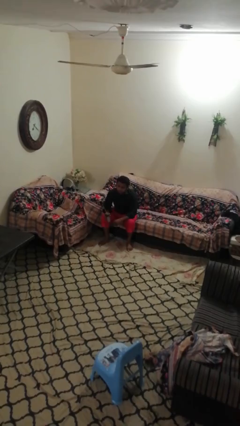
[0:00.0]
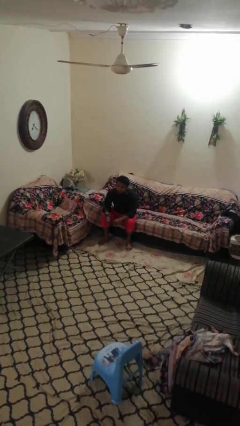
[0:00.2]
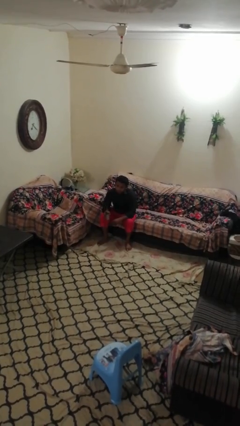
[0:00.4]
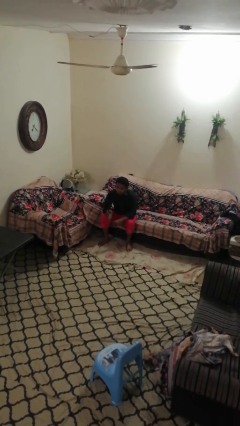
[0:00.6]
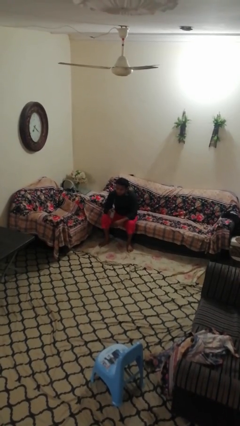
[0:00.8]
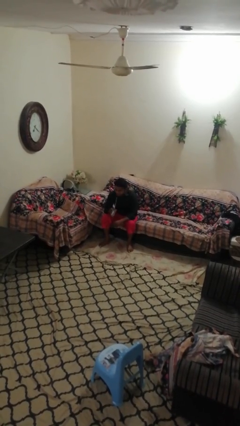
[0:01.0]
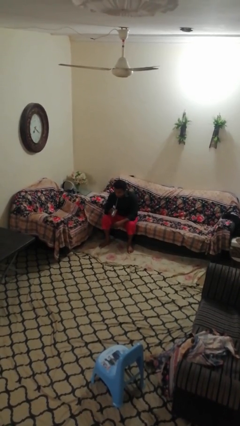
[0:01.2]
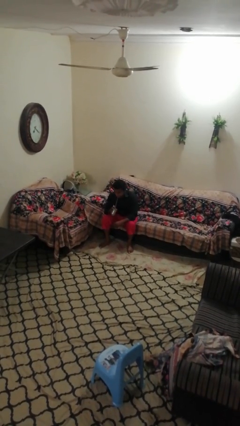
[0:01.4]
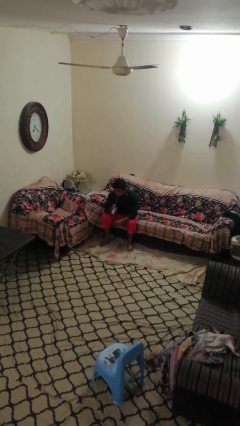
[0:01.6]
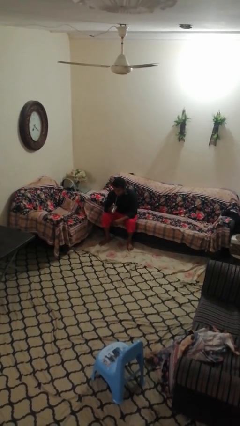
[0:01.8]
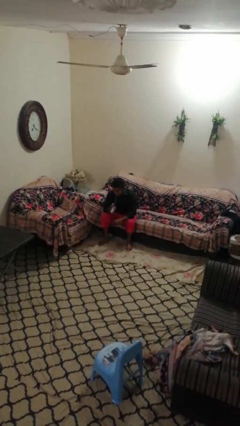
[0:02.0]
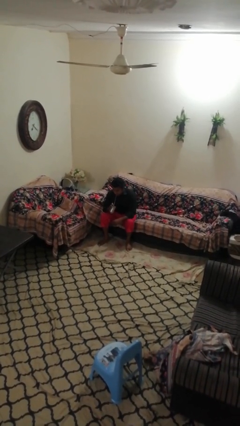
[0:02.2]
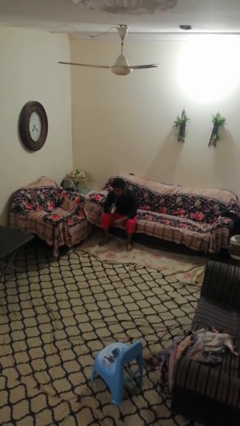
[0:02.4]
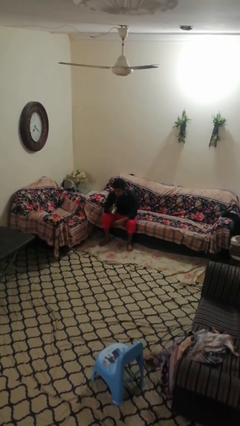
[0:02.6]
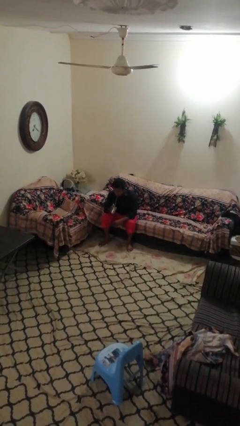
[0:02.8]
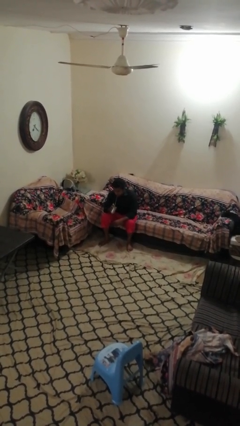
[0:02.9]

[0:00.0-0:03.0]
person drinks from straw

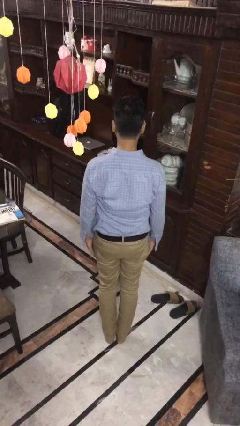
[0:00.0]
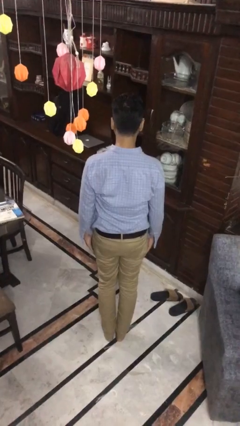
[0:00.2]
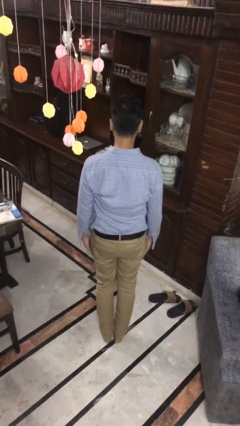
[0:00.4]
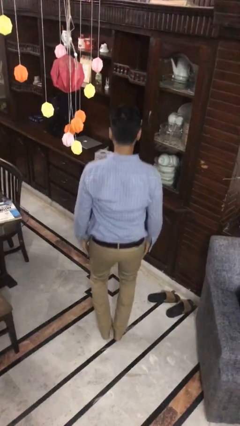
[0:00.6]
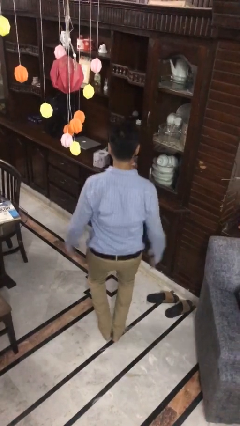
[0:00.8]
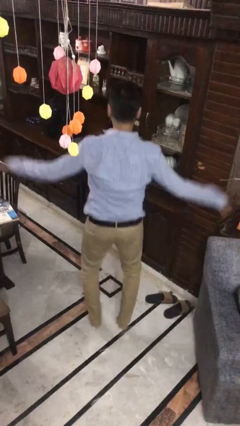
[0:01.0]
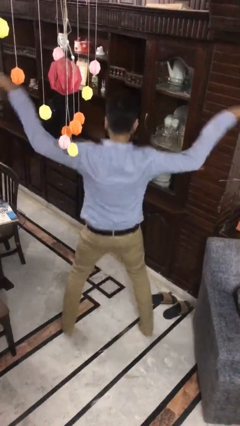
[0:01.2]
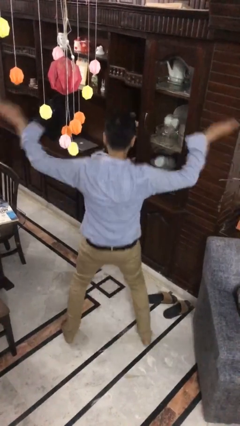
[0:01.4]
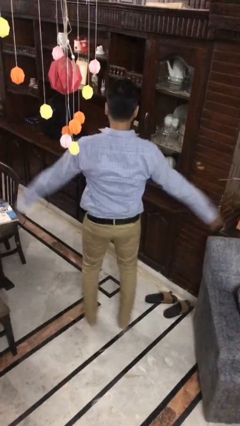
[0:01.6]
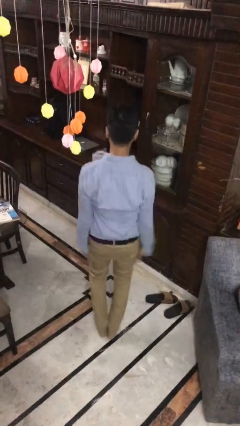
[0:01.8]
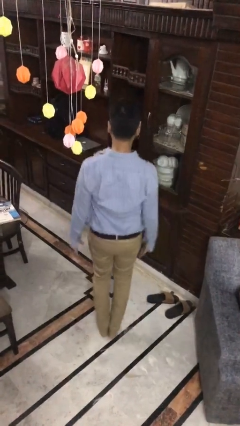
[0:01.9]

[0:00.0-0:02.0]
person exercises with jumping jacks

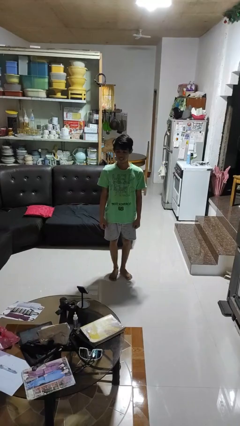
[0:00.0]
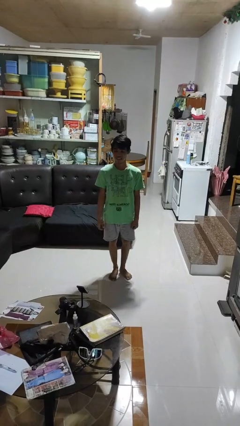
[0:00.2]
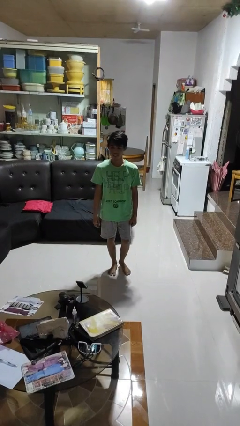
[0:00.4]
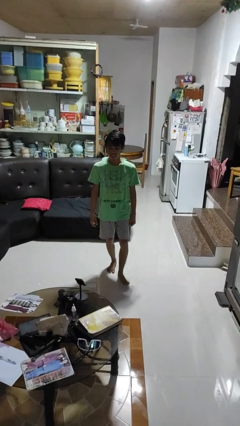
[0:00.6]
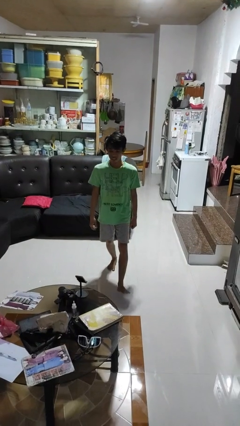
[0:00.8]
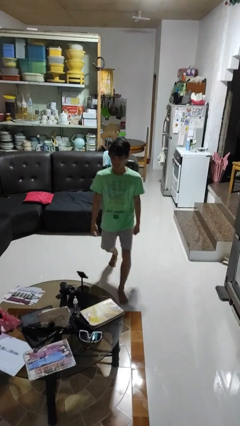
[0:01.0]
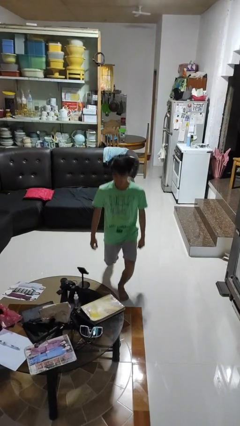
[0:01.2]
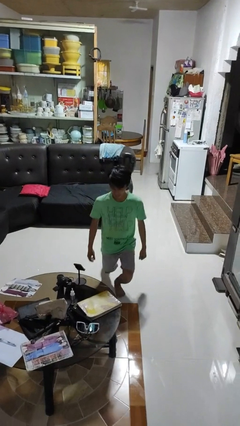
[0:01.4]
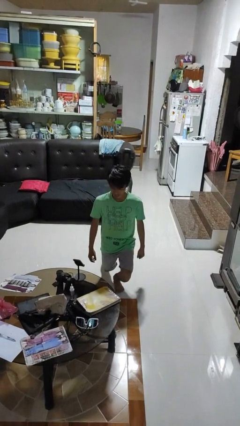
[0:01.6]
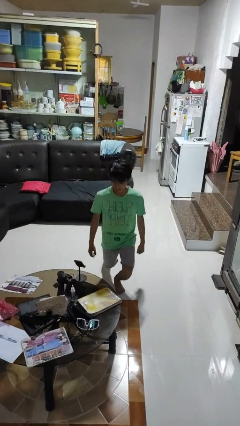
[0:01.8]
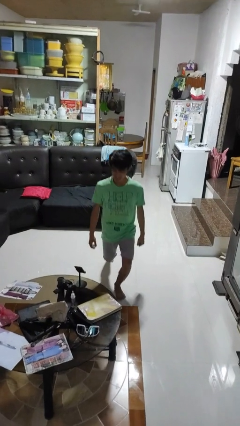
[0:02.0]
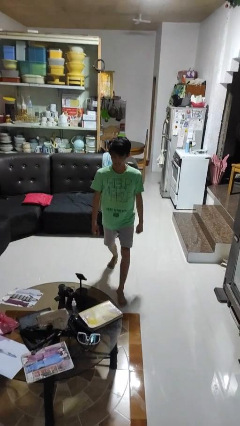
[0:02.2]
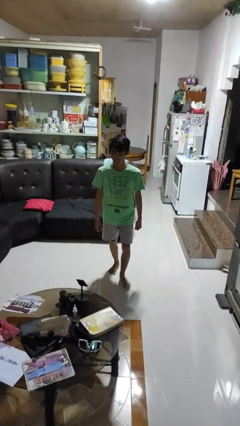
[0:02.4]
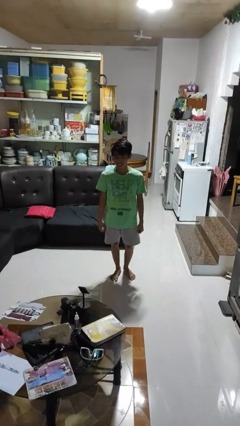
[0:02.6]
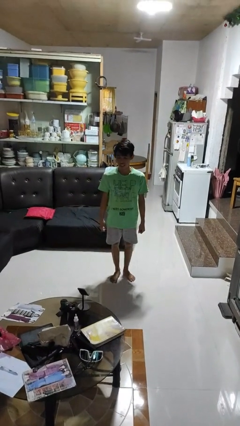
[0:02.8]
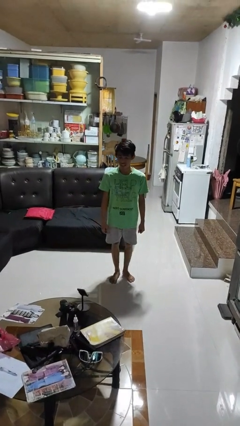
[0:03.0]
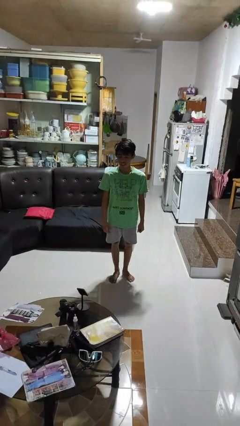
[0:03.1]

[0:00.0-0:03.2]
person exercises with lunges

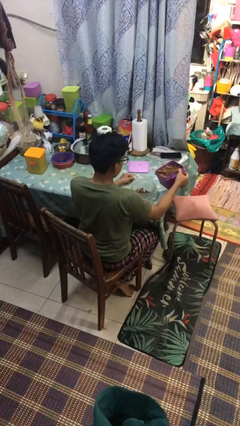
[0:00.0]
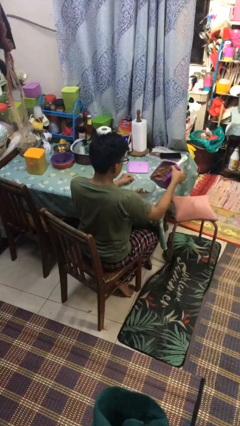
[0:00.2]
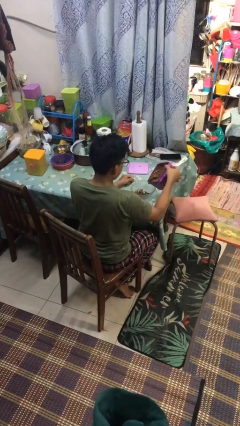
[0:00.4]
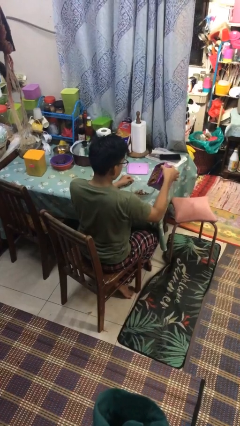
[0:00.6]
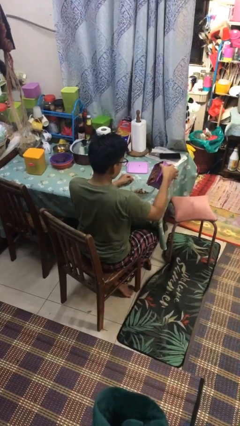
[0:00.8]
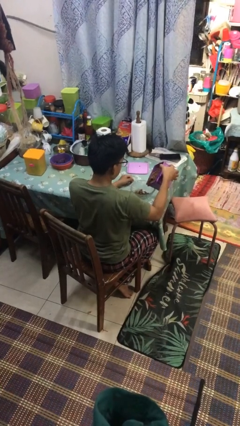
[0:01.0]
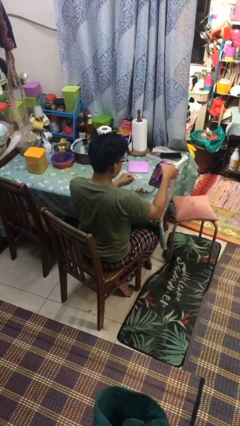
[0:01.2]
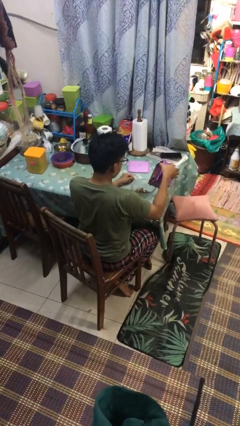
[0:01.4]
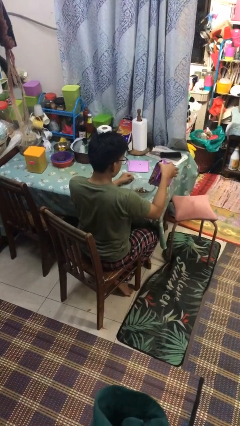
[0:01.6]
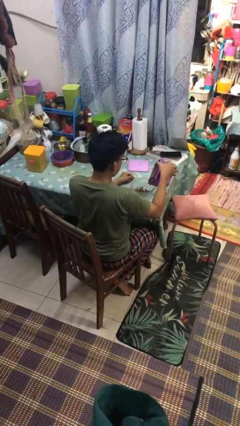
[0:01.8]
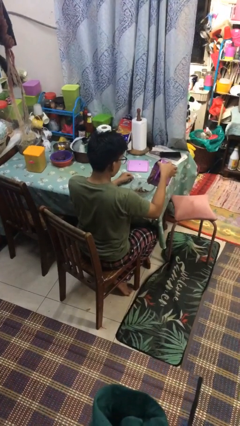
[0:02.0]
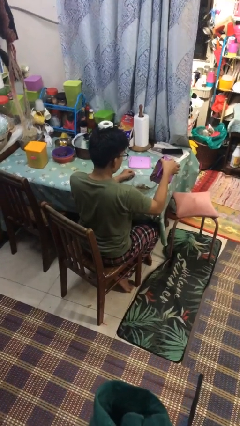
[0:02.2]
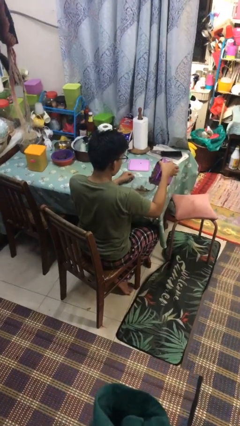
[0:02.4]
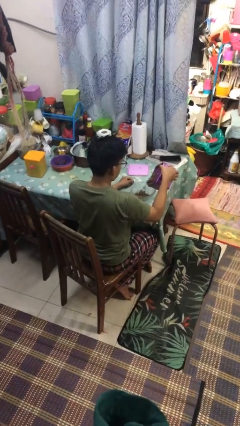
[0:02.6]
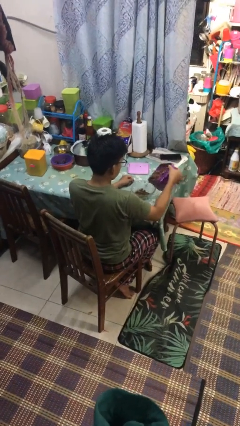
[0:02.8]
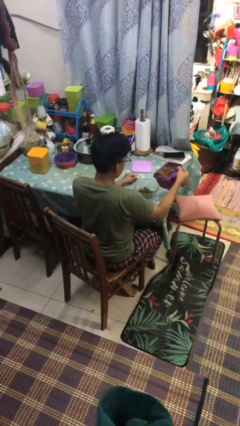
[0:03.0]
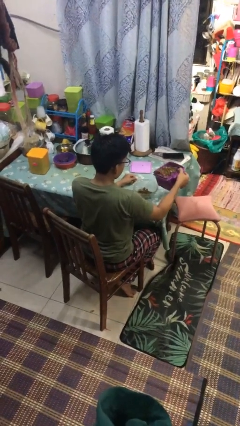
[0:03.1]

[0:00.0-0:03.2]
person pours into bowl

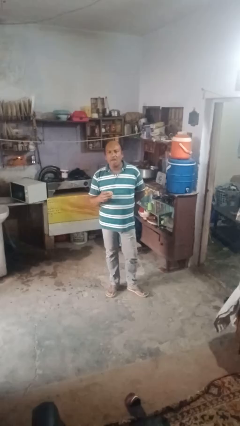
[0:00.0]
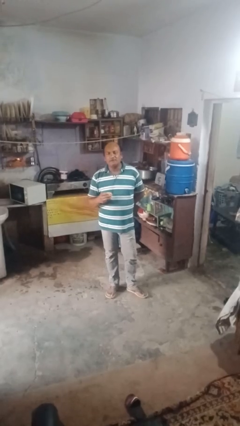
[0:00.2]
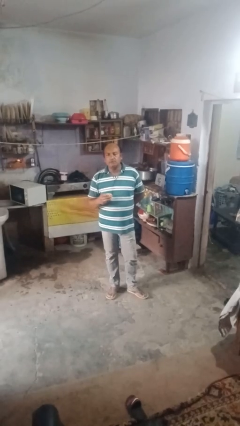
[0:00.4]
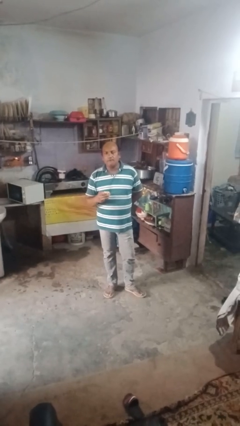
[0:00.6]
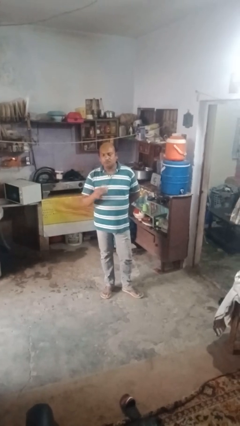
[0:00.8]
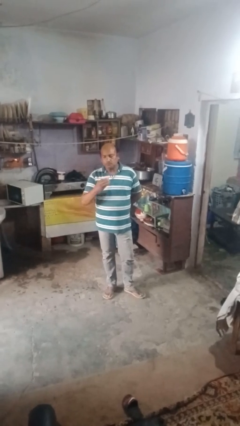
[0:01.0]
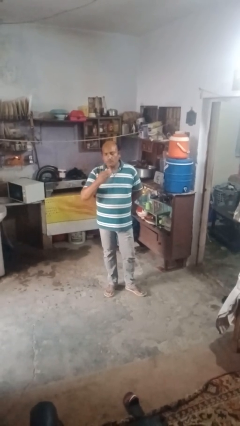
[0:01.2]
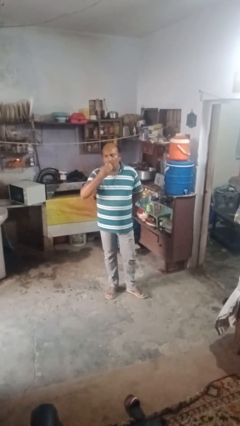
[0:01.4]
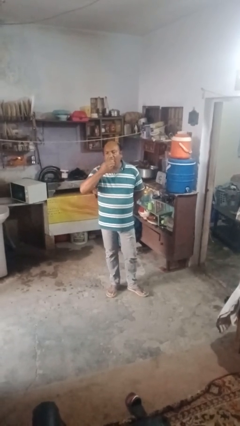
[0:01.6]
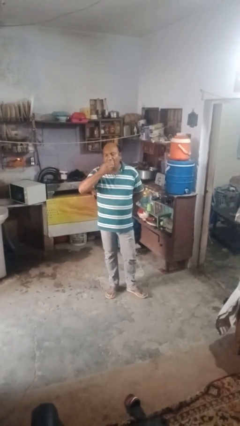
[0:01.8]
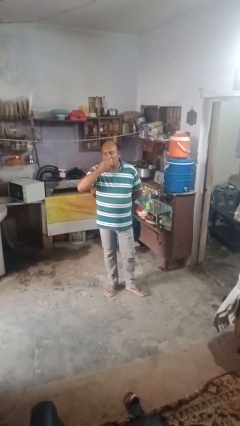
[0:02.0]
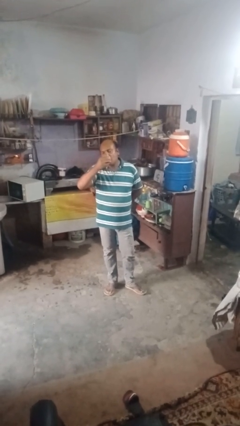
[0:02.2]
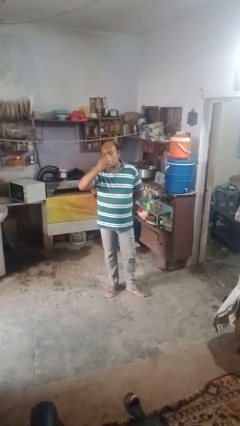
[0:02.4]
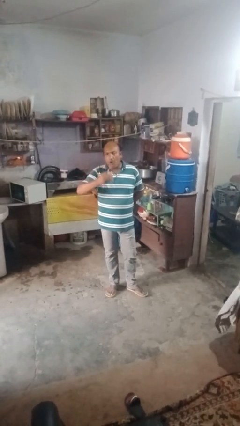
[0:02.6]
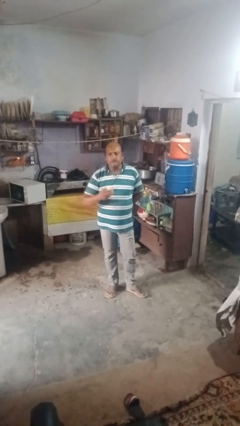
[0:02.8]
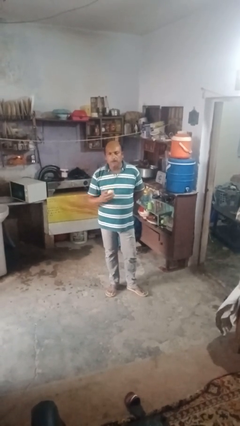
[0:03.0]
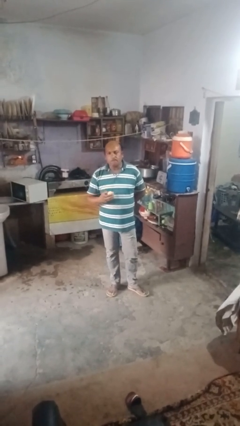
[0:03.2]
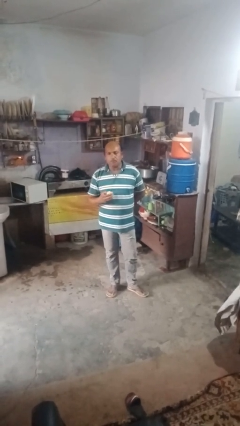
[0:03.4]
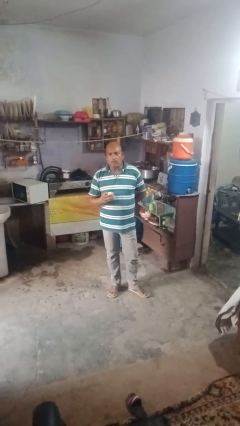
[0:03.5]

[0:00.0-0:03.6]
person eats apple

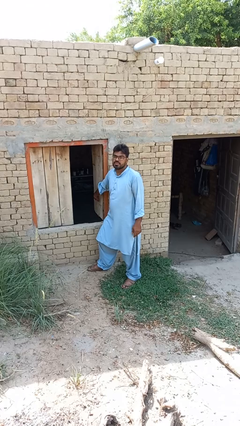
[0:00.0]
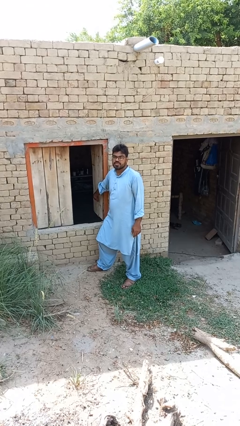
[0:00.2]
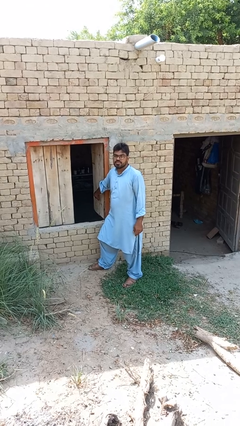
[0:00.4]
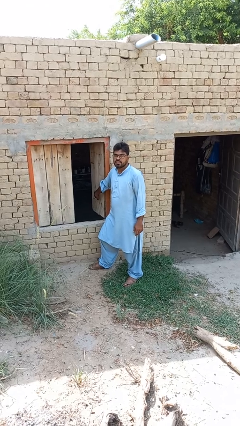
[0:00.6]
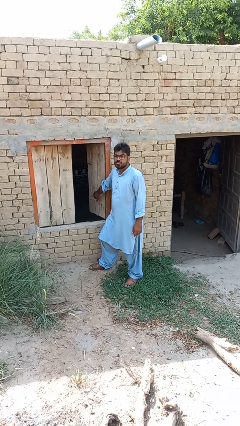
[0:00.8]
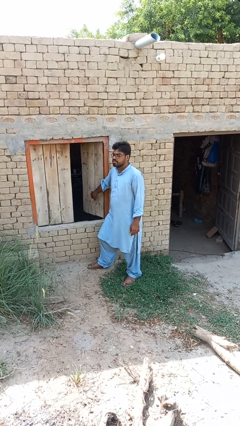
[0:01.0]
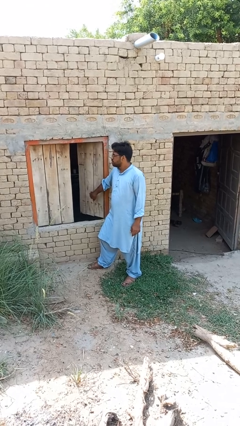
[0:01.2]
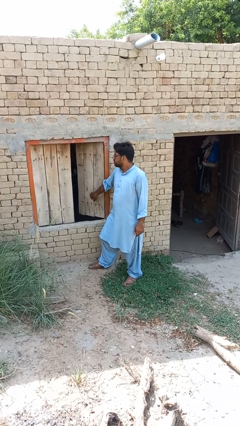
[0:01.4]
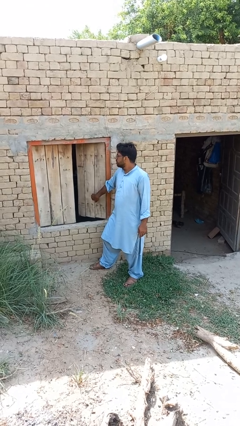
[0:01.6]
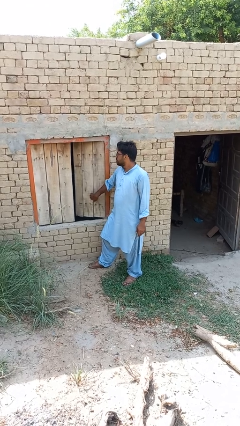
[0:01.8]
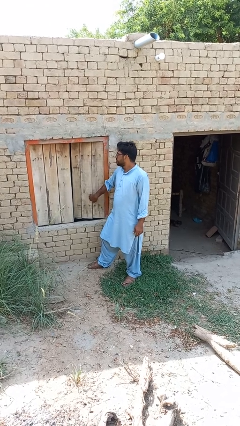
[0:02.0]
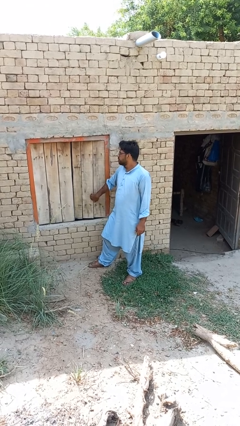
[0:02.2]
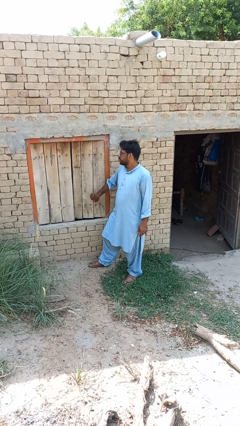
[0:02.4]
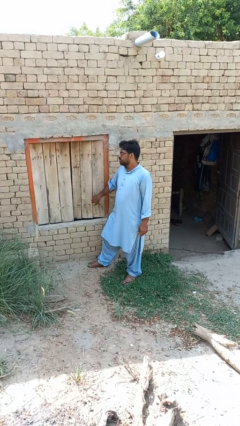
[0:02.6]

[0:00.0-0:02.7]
person closes home window

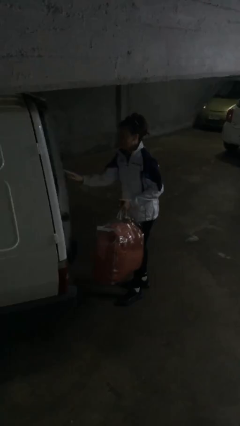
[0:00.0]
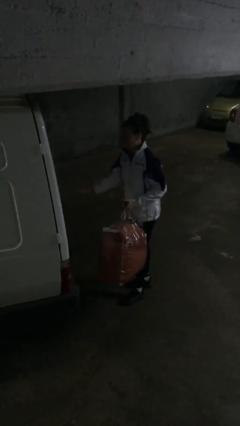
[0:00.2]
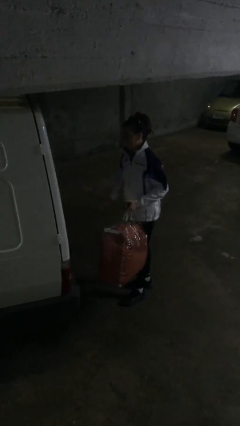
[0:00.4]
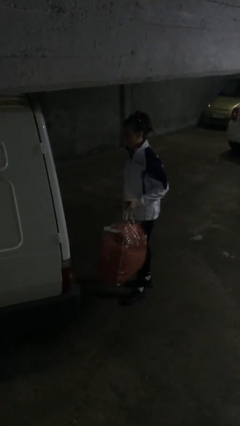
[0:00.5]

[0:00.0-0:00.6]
person closes car door
